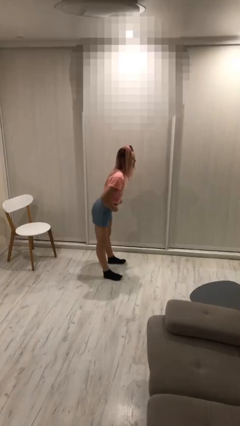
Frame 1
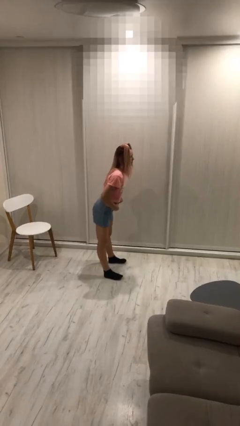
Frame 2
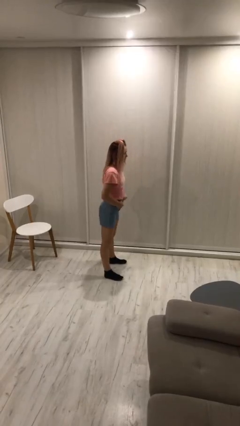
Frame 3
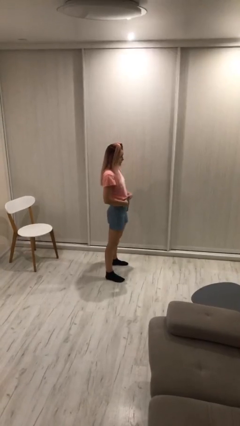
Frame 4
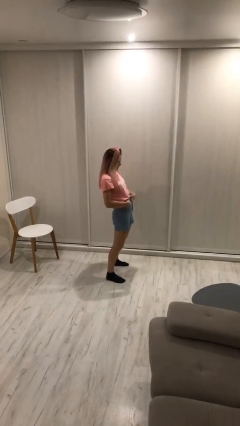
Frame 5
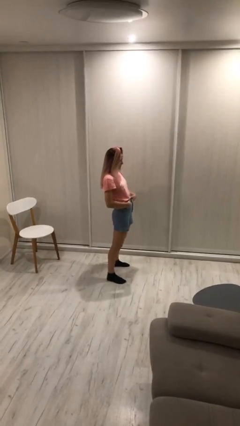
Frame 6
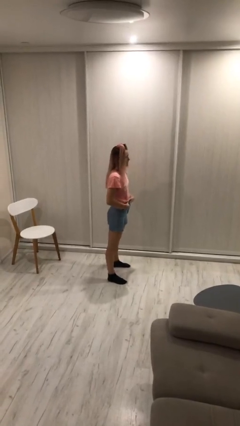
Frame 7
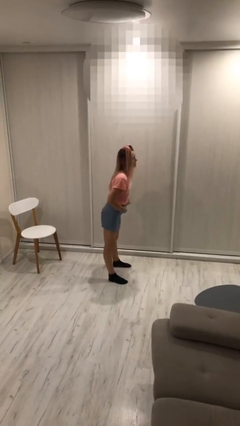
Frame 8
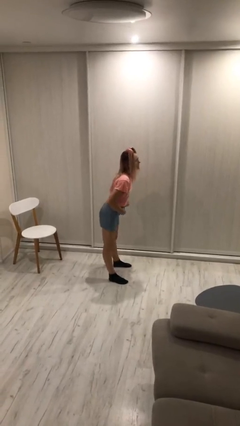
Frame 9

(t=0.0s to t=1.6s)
person wiggles hips

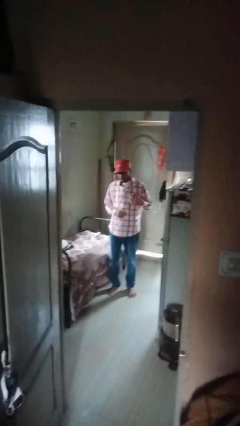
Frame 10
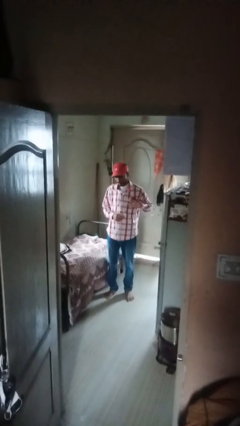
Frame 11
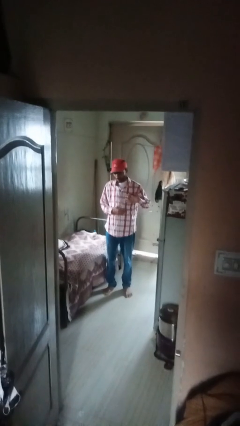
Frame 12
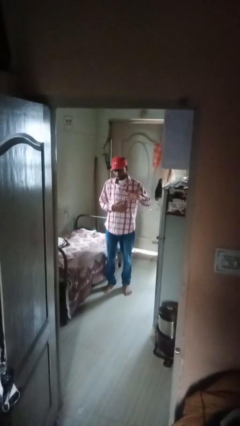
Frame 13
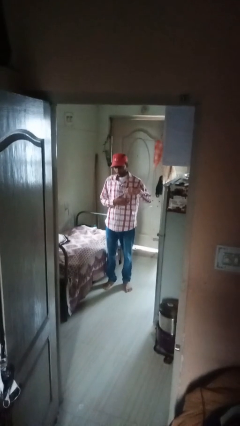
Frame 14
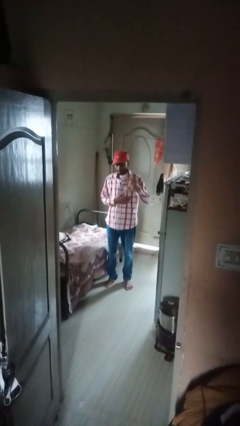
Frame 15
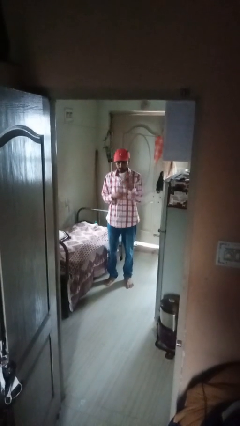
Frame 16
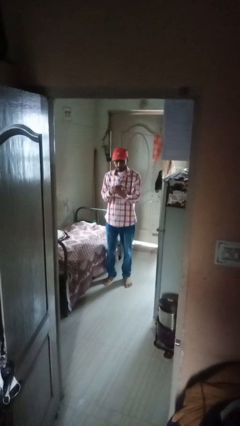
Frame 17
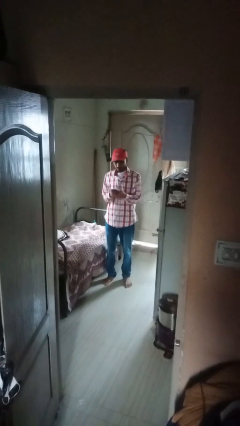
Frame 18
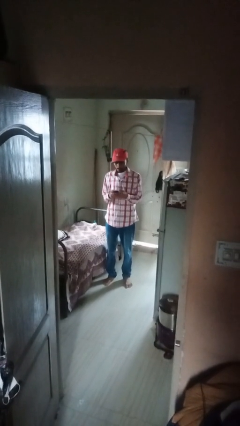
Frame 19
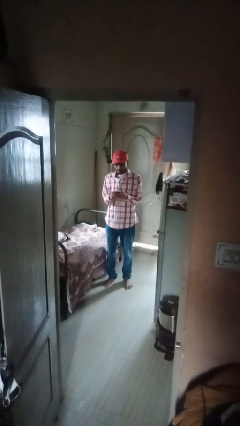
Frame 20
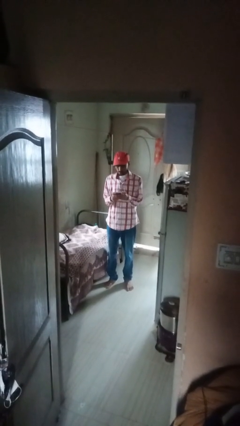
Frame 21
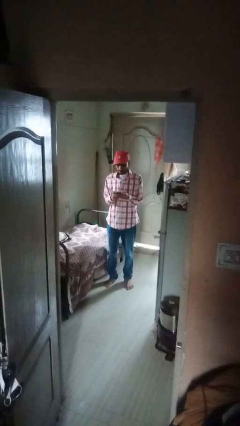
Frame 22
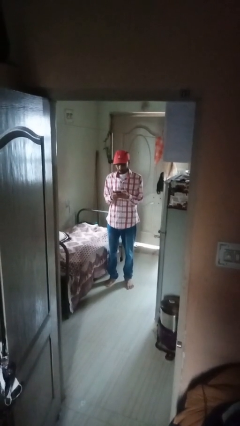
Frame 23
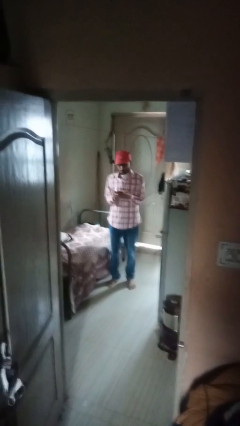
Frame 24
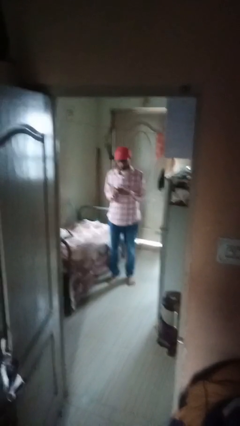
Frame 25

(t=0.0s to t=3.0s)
person takes phone from pocket

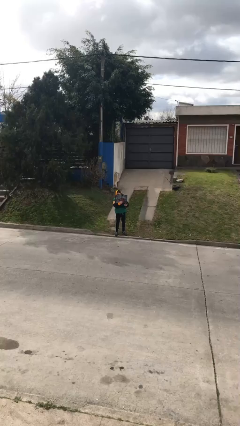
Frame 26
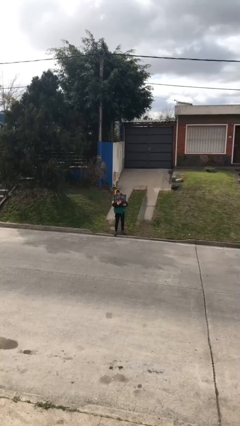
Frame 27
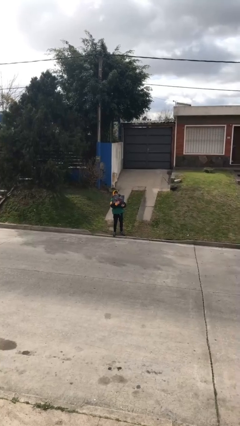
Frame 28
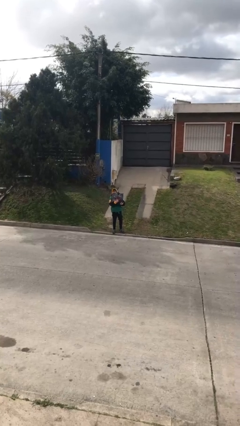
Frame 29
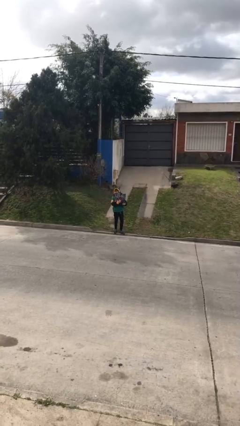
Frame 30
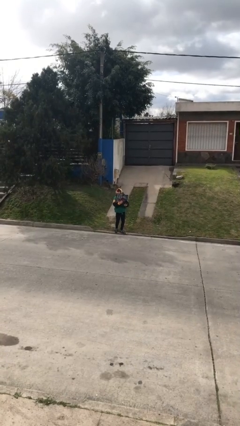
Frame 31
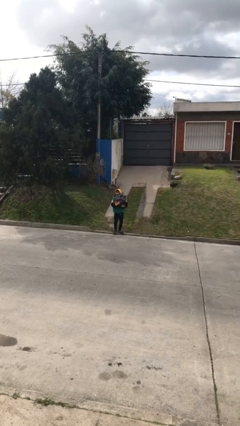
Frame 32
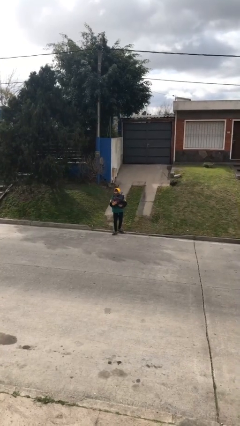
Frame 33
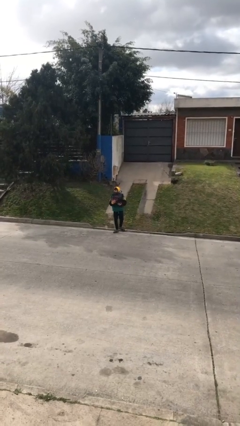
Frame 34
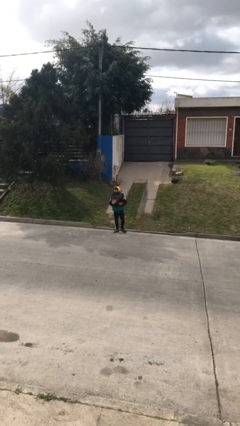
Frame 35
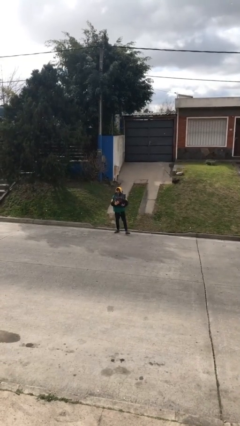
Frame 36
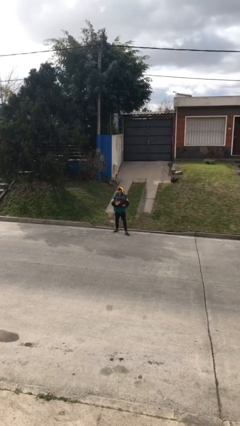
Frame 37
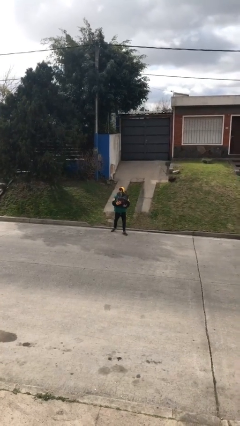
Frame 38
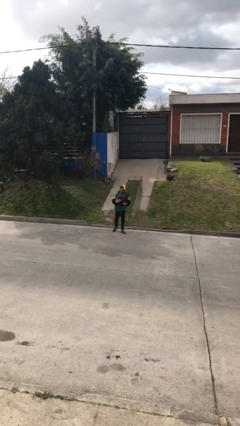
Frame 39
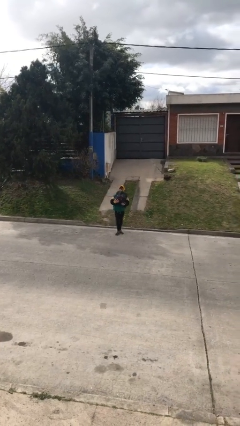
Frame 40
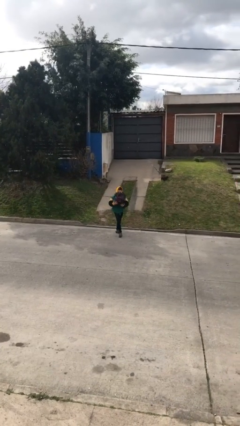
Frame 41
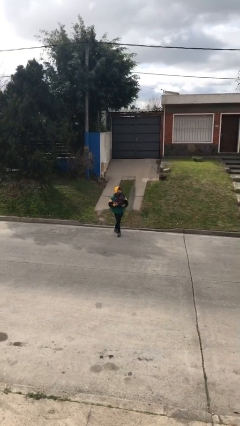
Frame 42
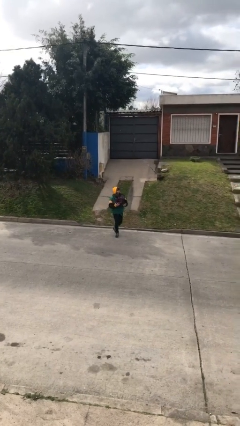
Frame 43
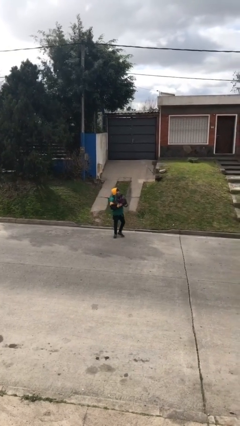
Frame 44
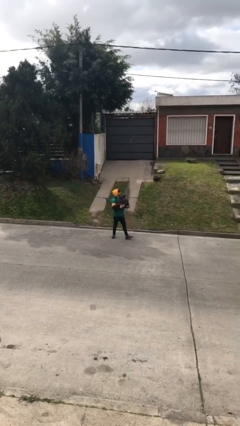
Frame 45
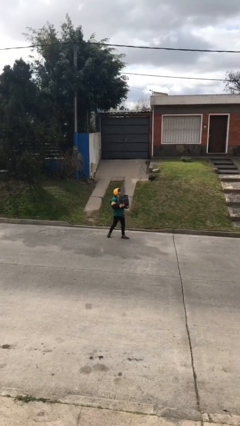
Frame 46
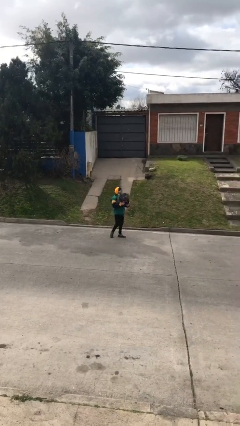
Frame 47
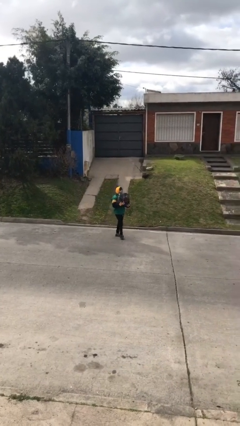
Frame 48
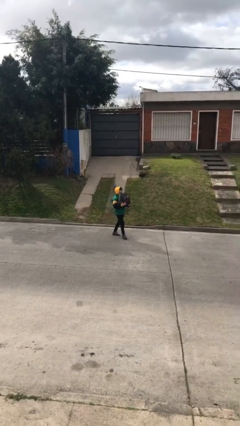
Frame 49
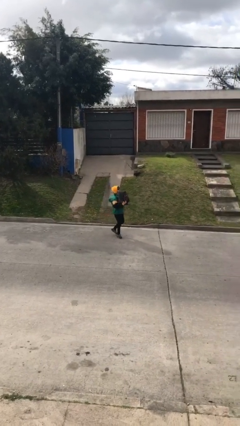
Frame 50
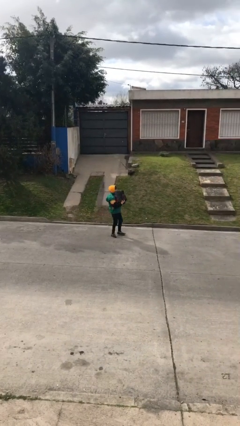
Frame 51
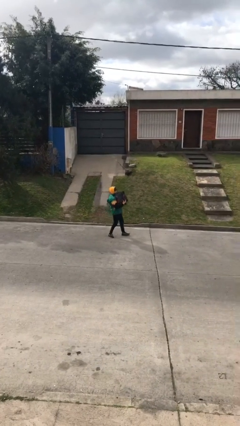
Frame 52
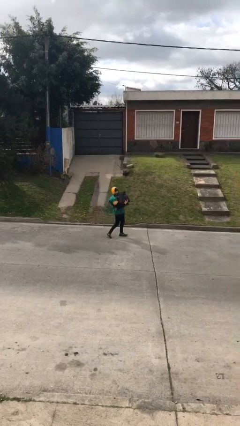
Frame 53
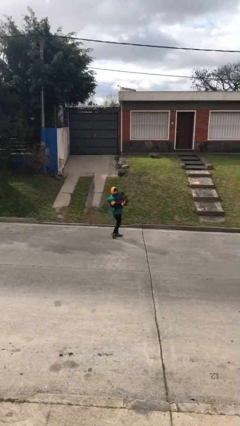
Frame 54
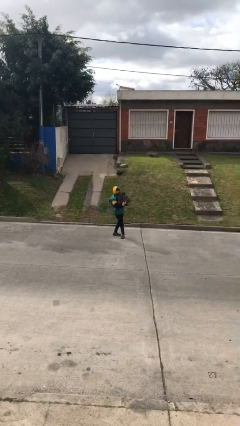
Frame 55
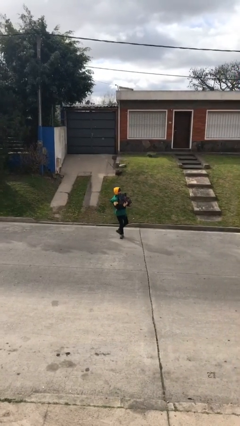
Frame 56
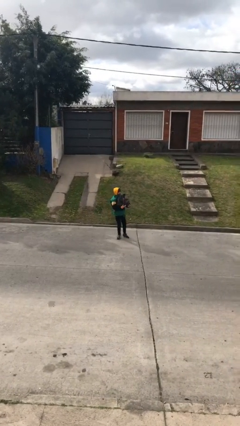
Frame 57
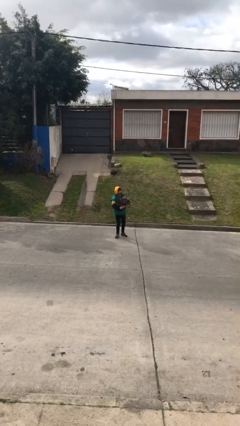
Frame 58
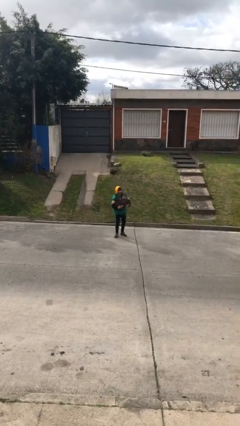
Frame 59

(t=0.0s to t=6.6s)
person carries heavy object

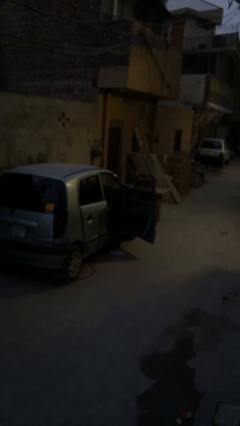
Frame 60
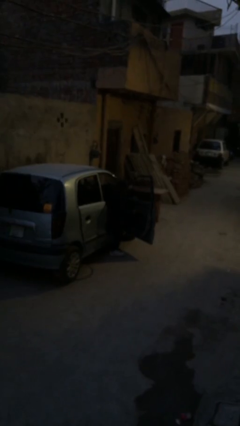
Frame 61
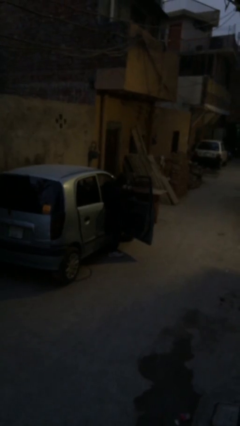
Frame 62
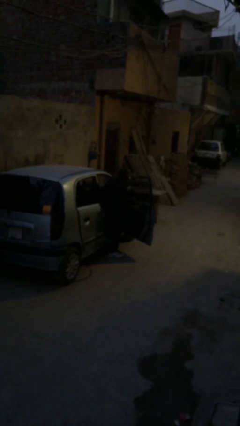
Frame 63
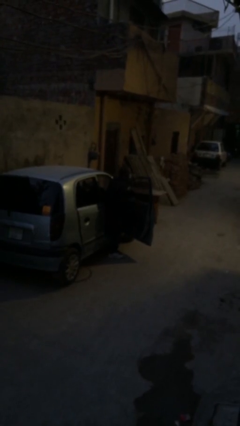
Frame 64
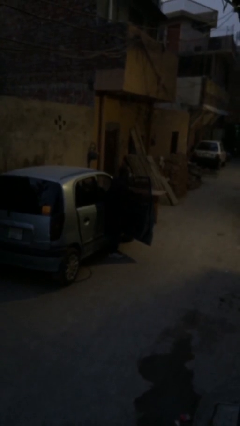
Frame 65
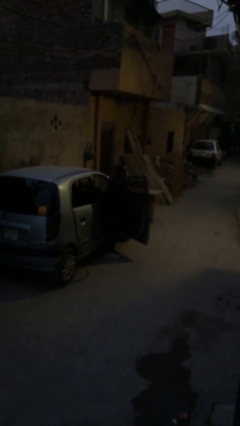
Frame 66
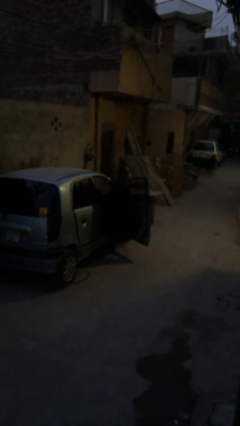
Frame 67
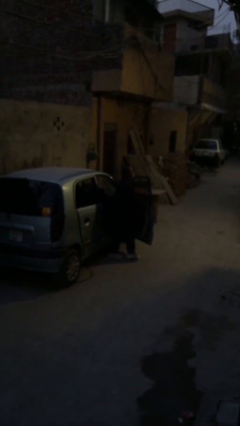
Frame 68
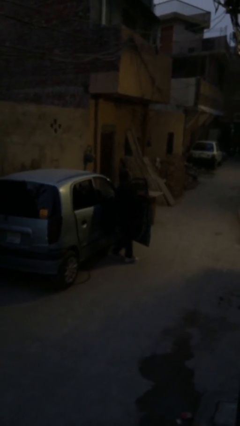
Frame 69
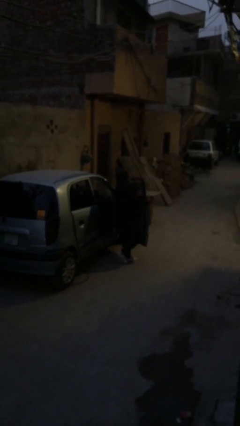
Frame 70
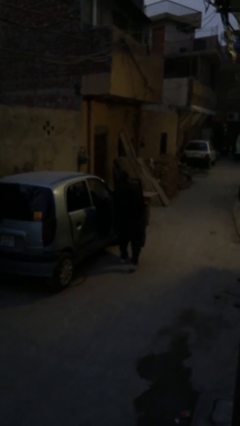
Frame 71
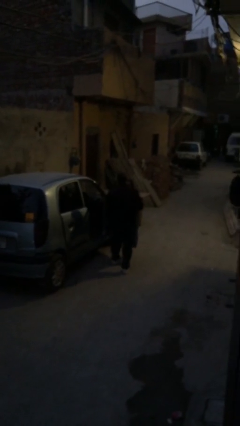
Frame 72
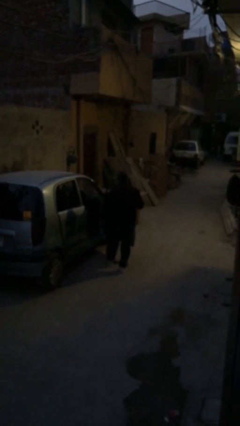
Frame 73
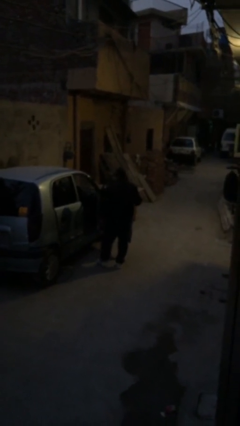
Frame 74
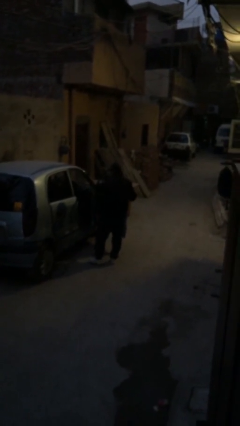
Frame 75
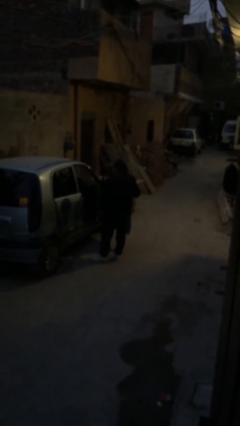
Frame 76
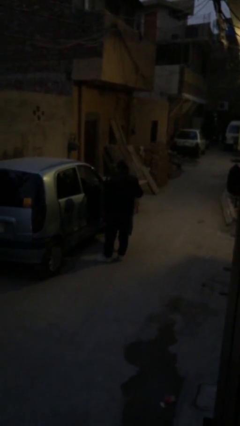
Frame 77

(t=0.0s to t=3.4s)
person exits car

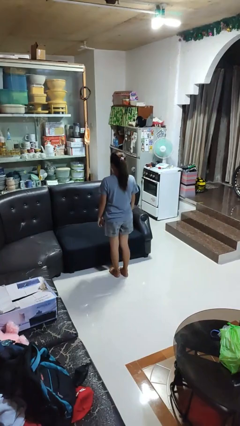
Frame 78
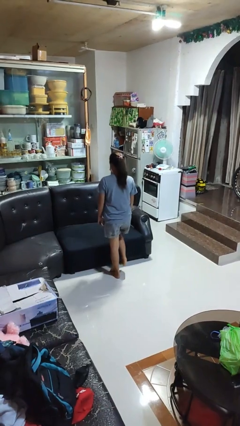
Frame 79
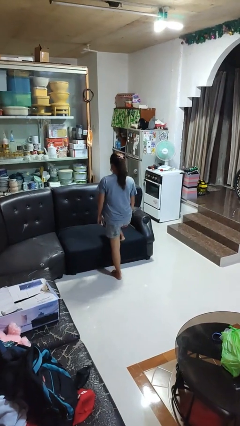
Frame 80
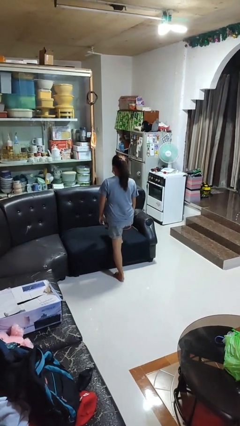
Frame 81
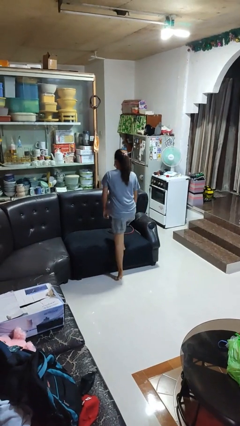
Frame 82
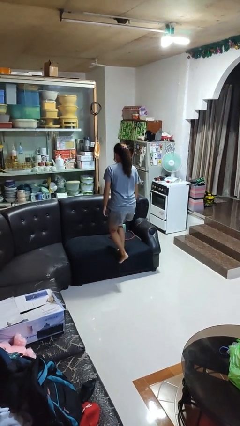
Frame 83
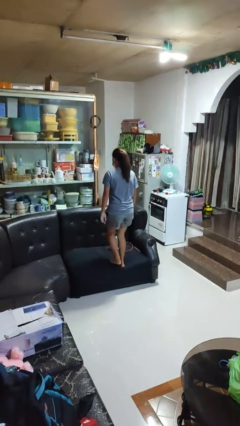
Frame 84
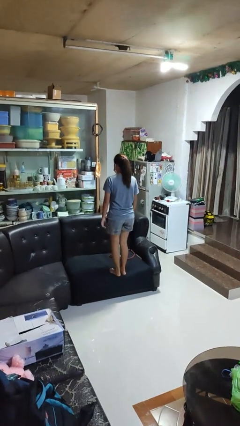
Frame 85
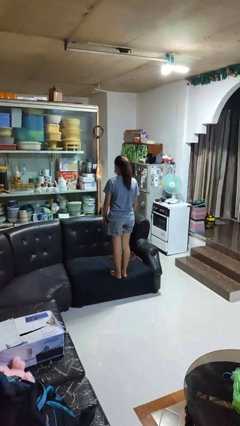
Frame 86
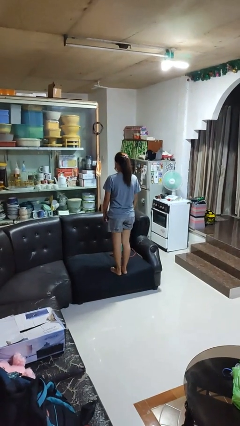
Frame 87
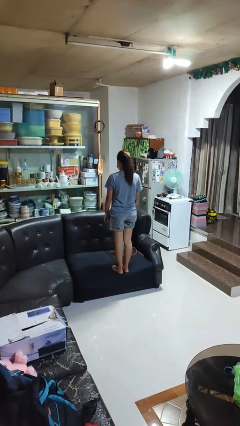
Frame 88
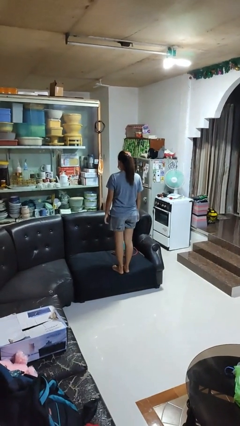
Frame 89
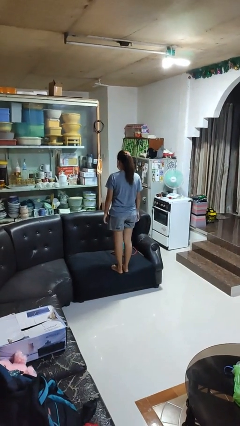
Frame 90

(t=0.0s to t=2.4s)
person climbs on couch

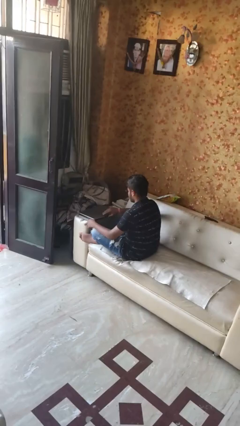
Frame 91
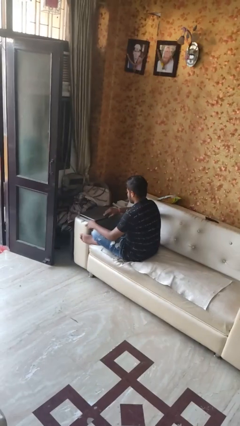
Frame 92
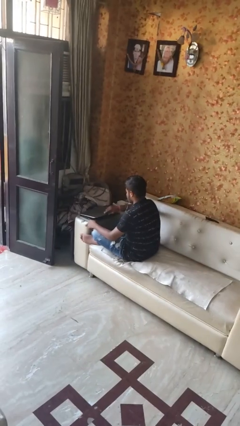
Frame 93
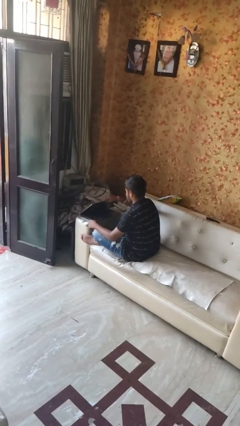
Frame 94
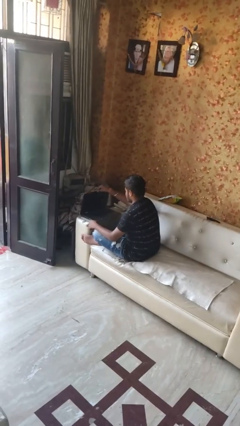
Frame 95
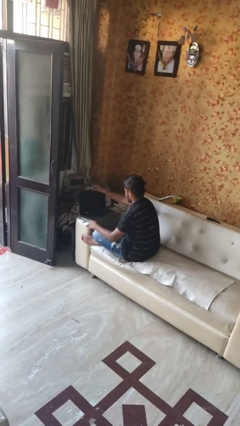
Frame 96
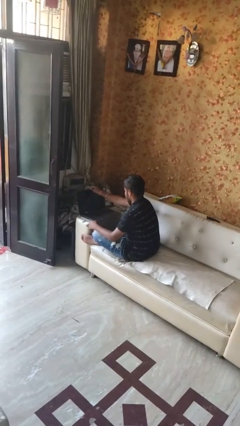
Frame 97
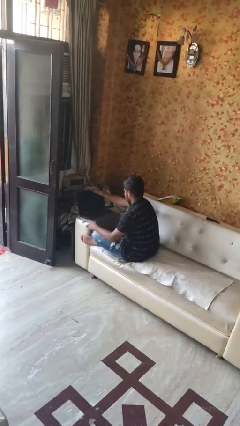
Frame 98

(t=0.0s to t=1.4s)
person opens laptop
